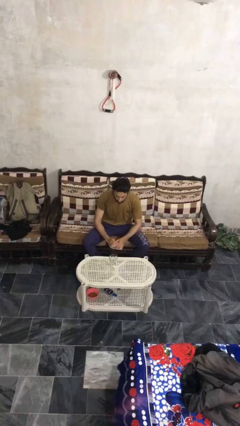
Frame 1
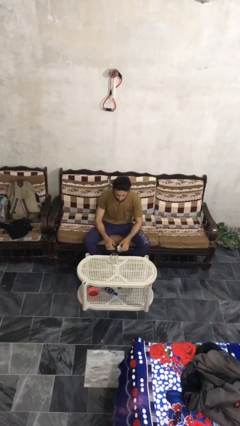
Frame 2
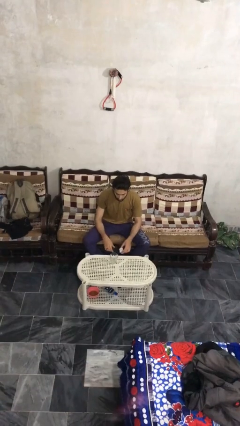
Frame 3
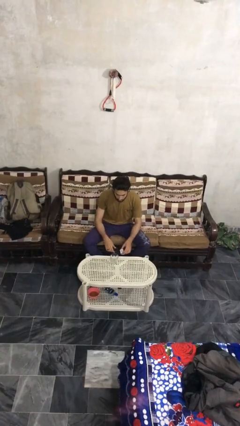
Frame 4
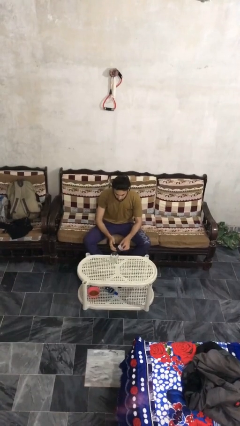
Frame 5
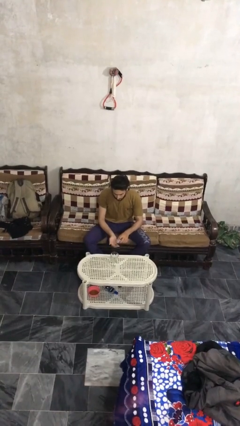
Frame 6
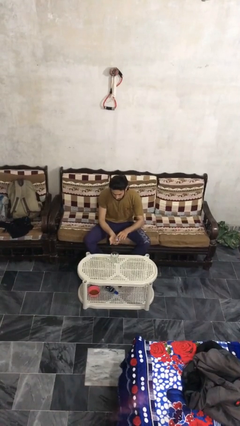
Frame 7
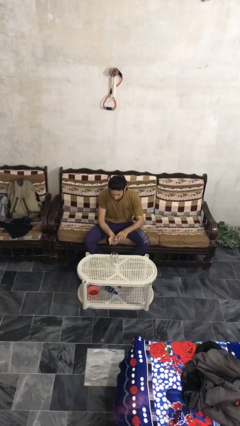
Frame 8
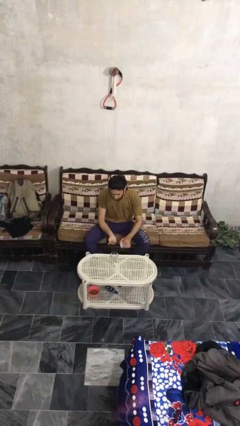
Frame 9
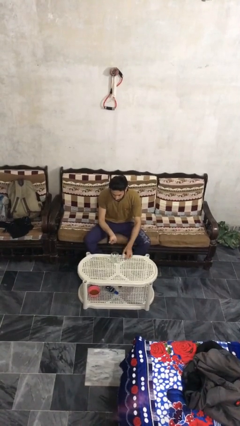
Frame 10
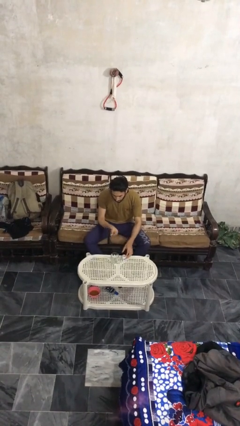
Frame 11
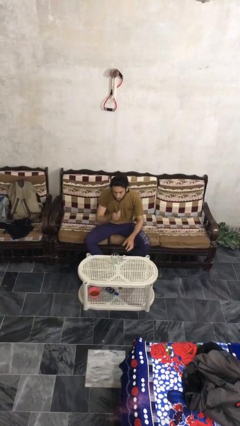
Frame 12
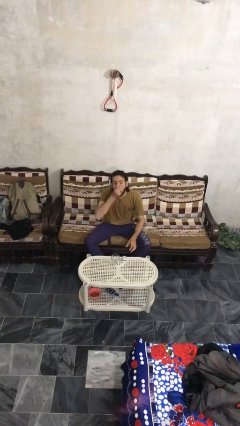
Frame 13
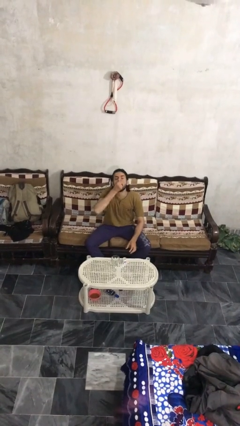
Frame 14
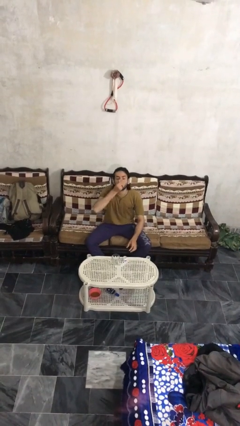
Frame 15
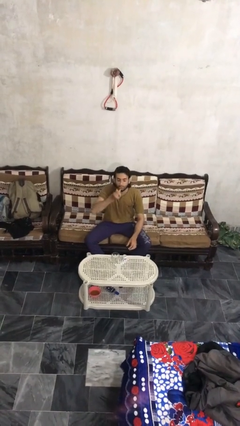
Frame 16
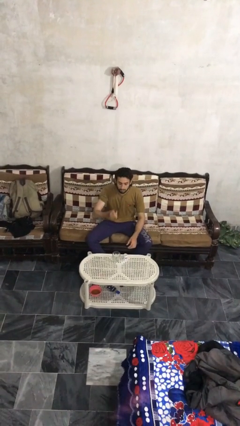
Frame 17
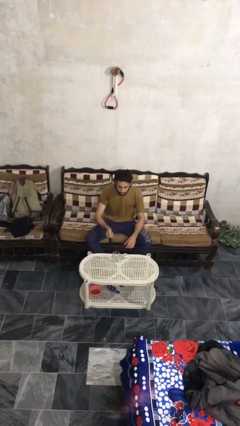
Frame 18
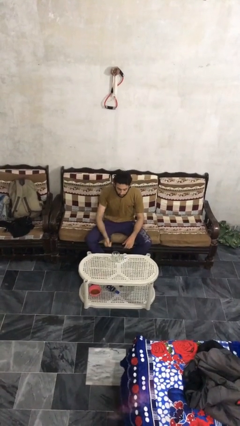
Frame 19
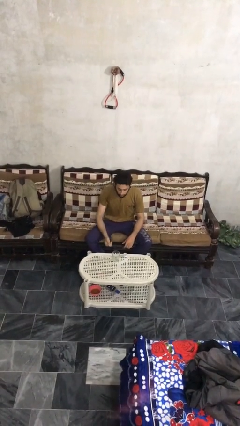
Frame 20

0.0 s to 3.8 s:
person takes medicine pills

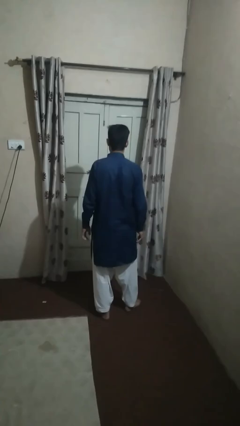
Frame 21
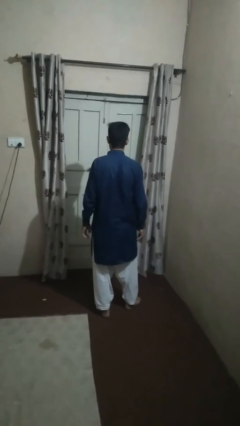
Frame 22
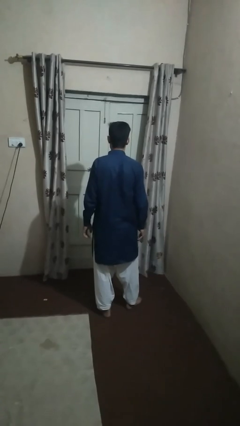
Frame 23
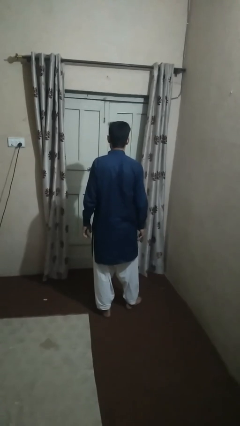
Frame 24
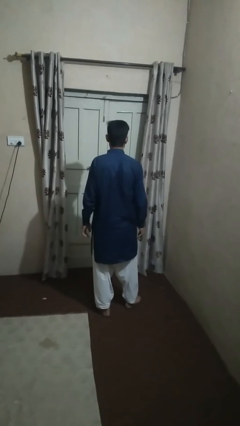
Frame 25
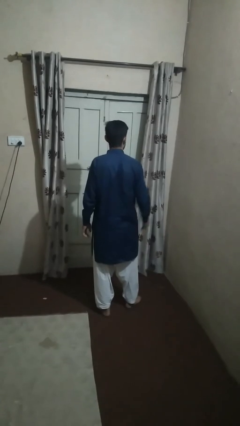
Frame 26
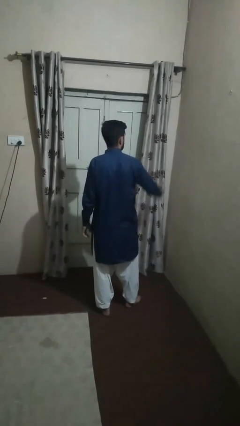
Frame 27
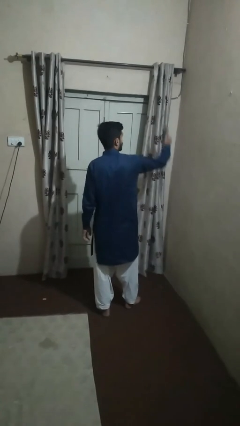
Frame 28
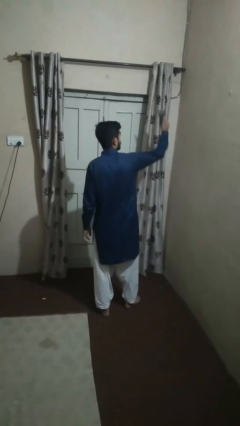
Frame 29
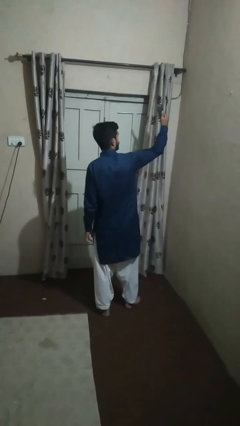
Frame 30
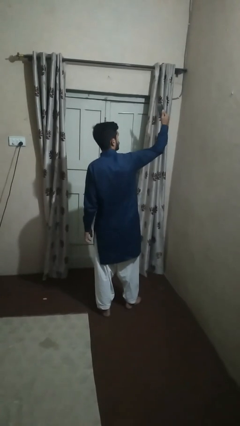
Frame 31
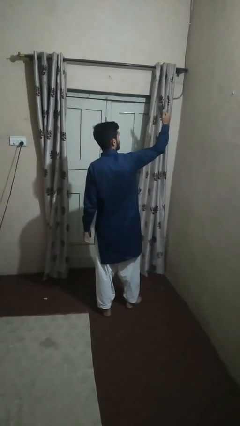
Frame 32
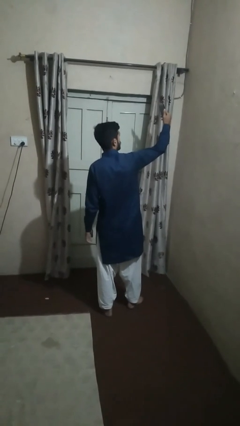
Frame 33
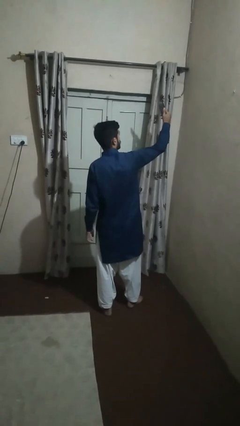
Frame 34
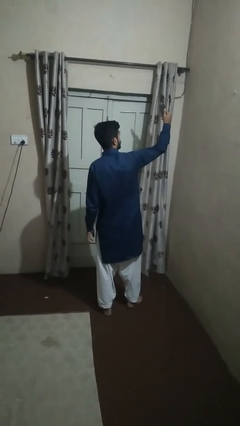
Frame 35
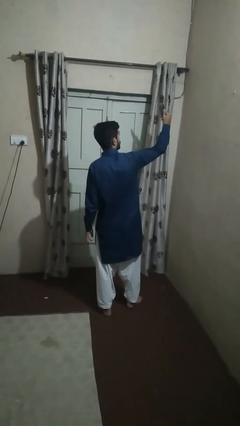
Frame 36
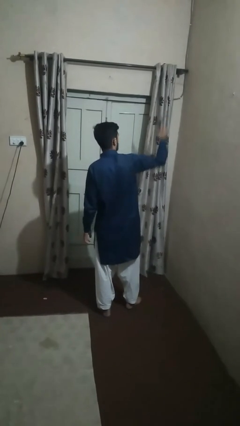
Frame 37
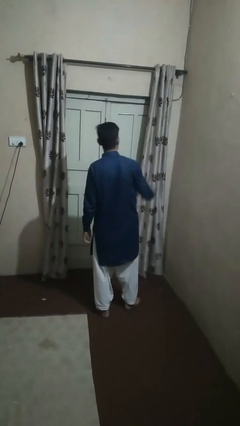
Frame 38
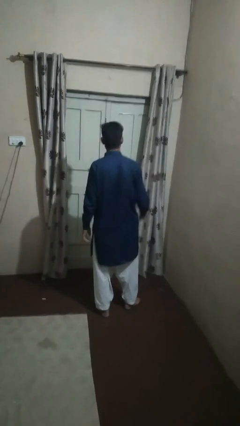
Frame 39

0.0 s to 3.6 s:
person takes selfie

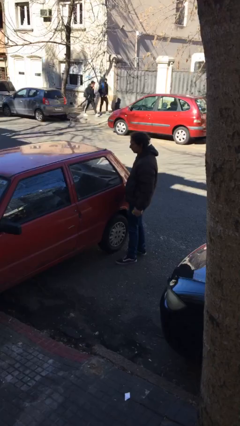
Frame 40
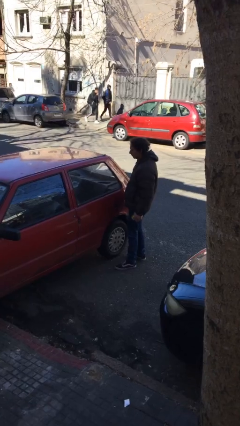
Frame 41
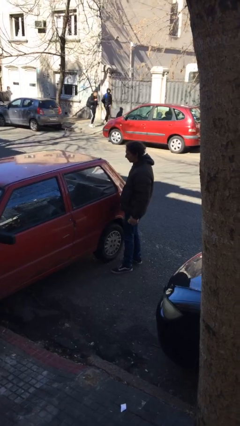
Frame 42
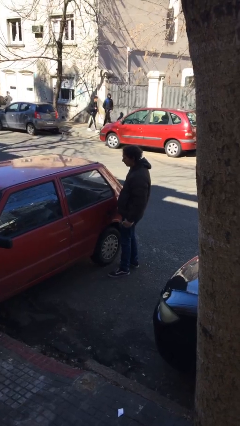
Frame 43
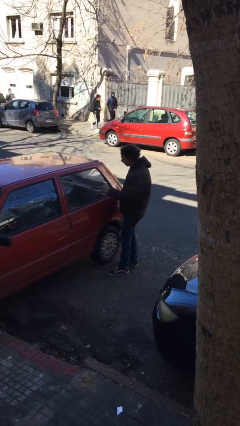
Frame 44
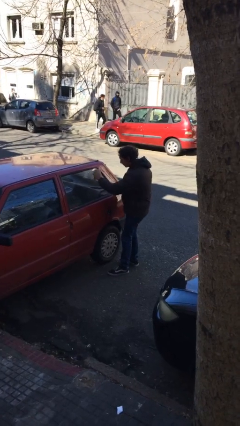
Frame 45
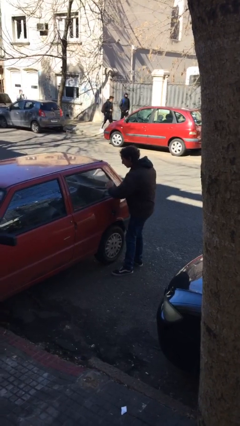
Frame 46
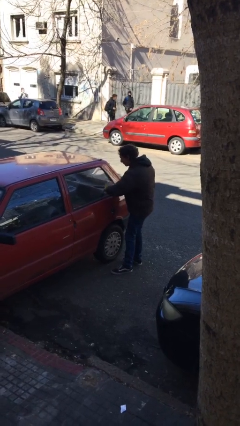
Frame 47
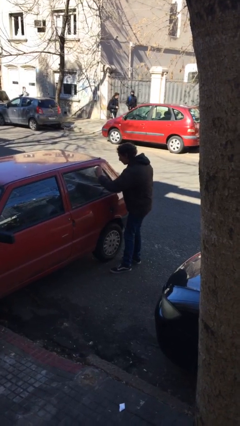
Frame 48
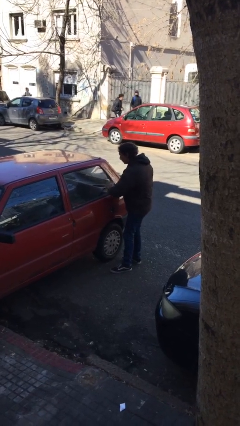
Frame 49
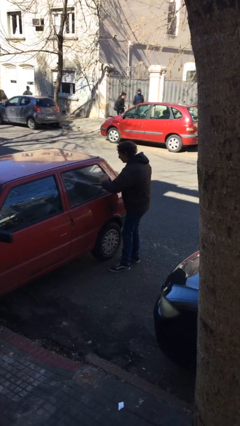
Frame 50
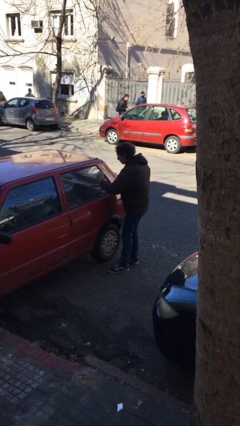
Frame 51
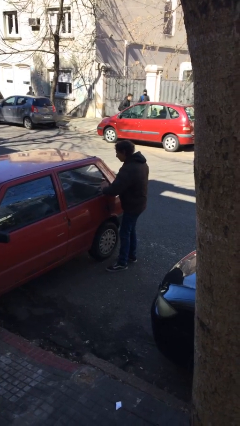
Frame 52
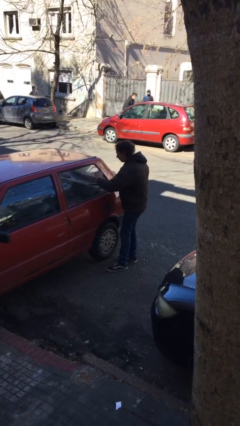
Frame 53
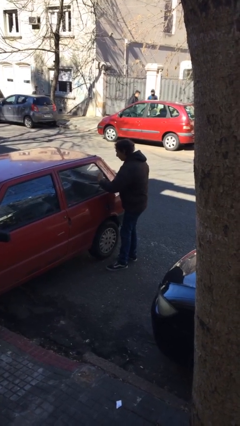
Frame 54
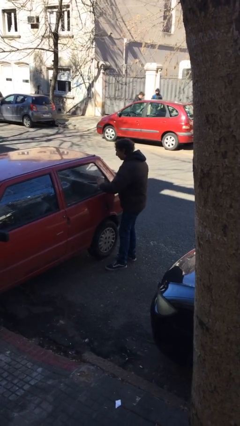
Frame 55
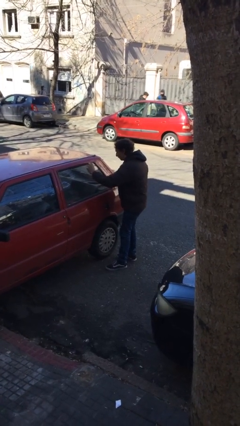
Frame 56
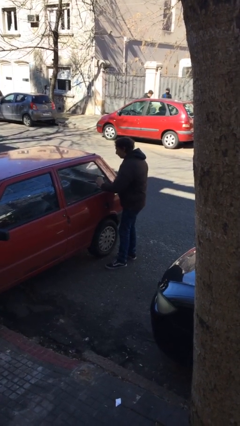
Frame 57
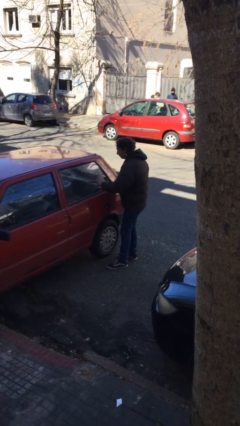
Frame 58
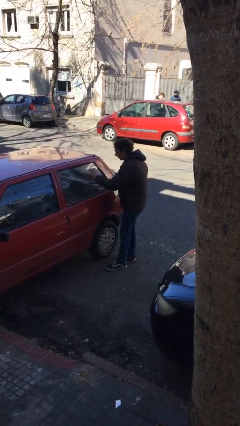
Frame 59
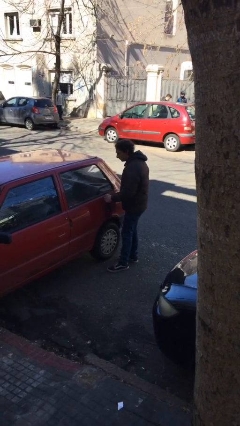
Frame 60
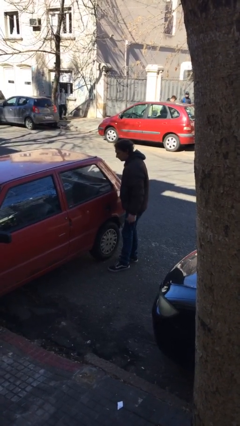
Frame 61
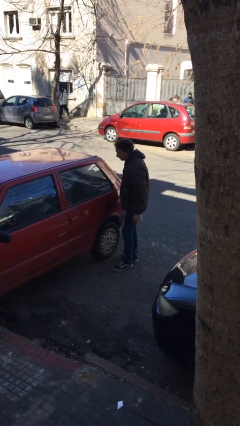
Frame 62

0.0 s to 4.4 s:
person polishes car with rag

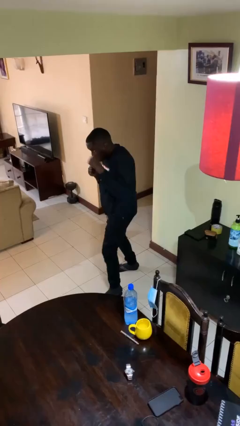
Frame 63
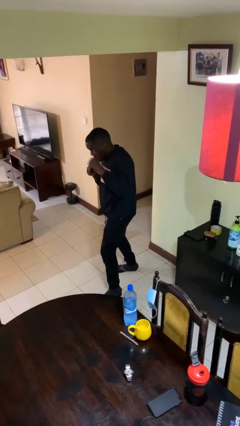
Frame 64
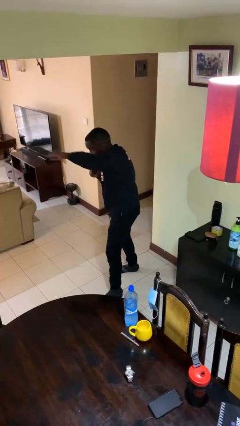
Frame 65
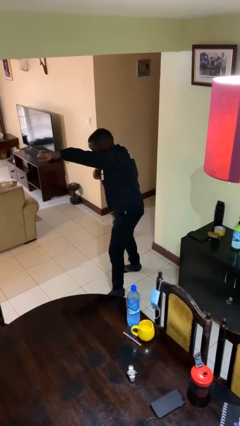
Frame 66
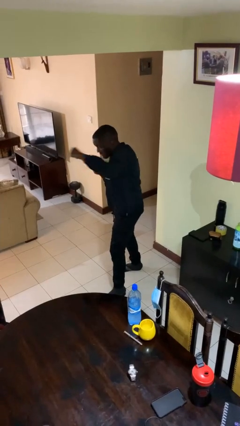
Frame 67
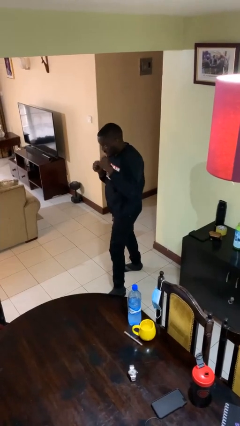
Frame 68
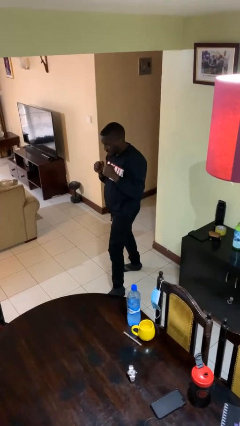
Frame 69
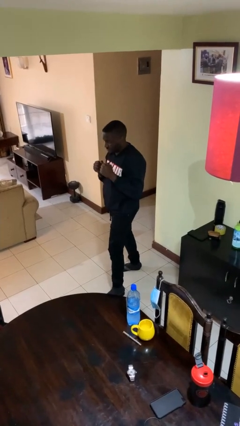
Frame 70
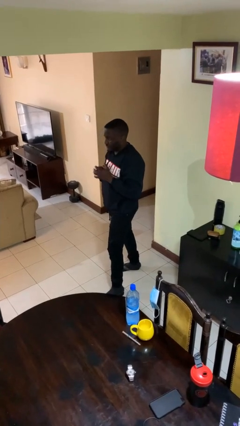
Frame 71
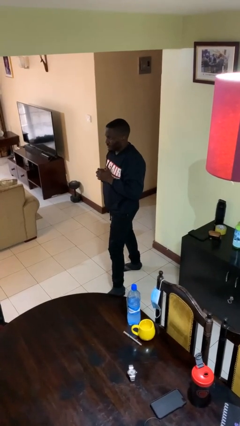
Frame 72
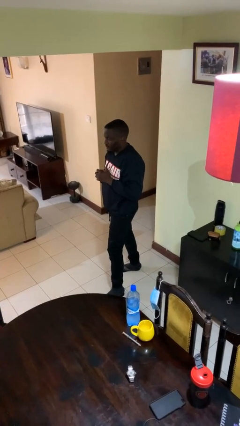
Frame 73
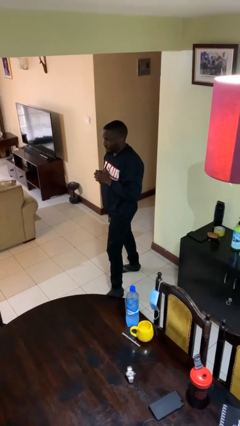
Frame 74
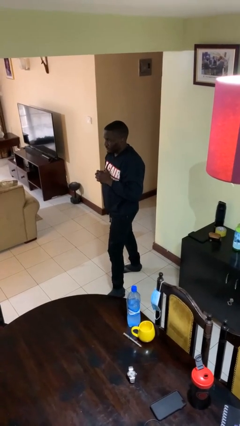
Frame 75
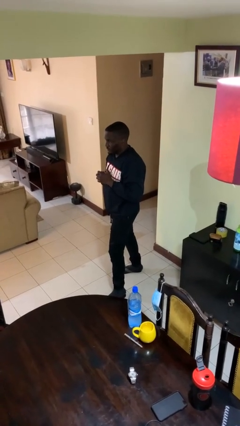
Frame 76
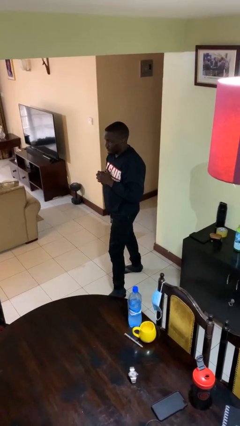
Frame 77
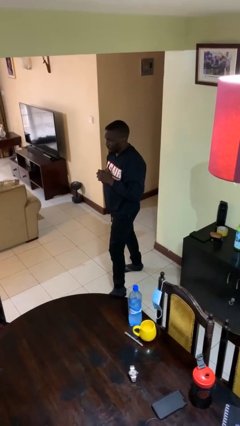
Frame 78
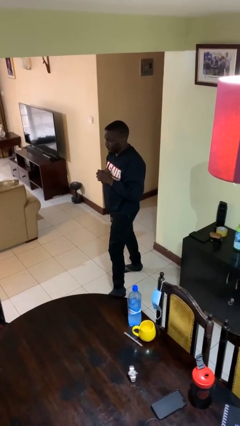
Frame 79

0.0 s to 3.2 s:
person punches

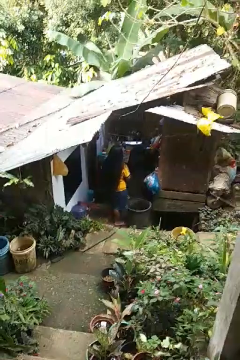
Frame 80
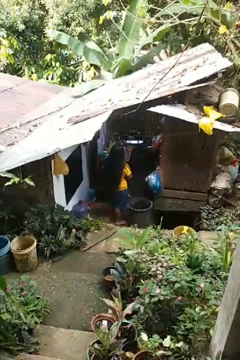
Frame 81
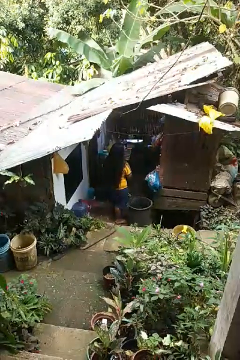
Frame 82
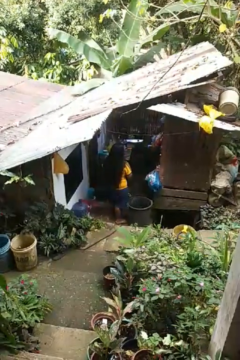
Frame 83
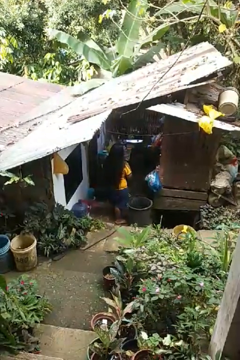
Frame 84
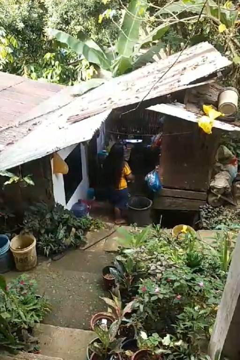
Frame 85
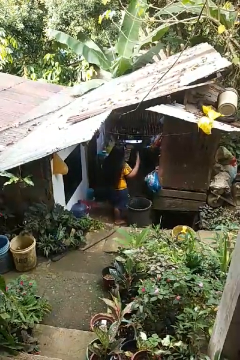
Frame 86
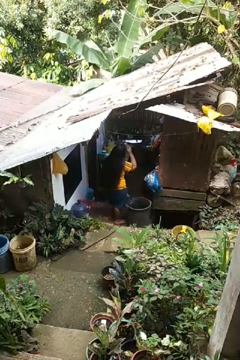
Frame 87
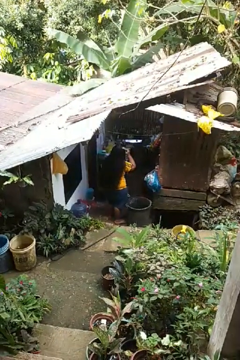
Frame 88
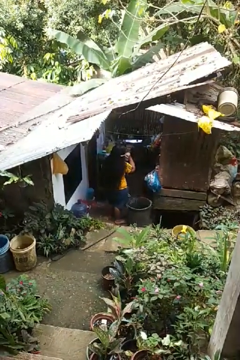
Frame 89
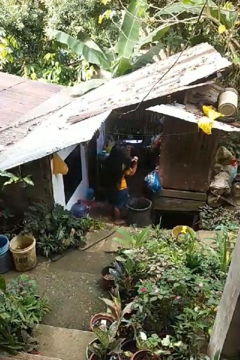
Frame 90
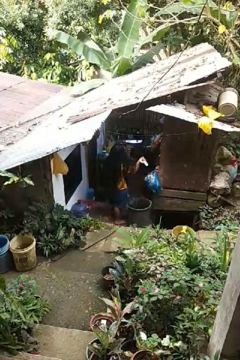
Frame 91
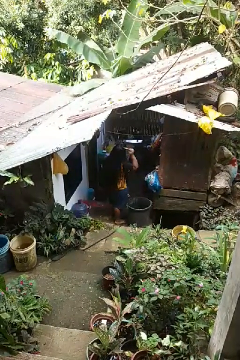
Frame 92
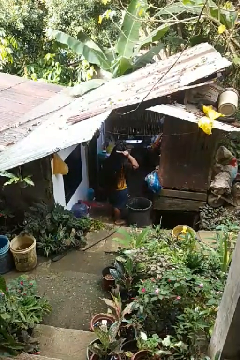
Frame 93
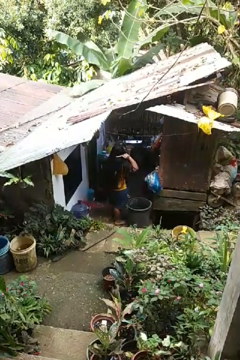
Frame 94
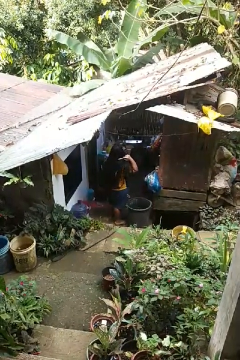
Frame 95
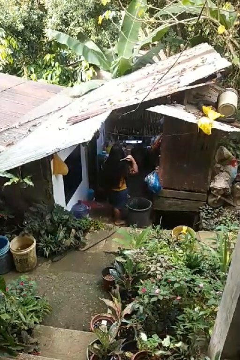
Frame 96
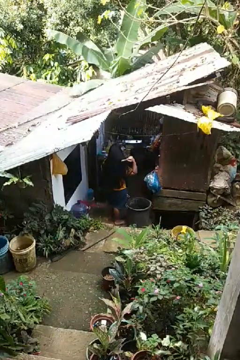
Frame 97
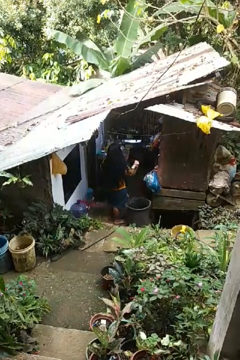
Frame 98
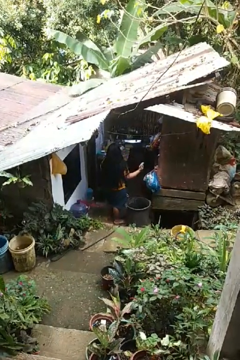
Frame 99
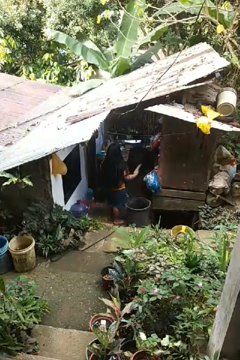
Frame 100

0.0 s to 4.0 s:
person brushes hair
